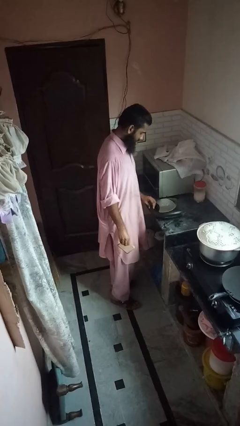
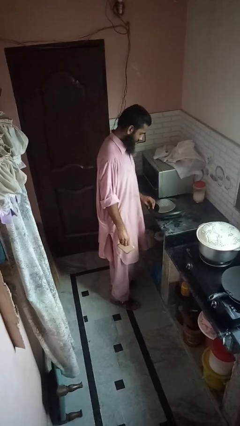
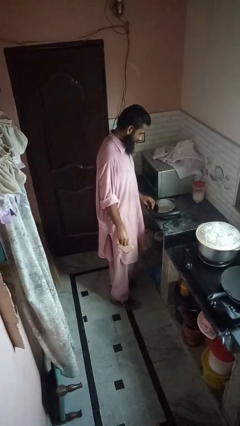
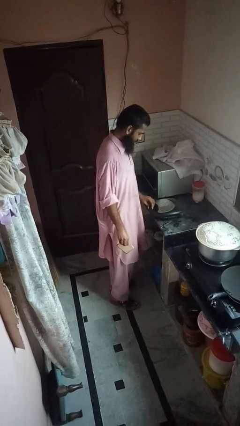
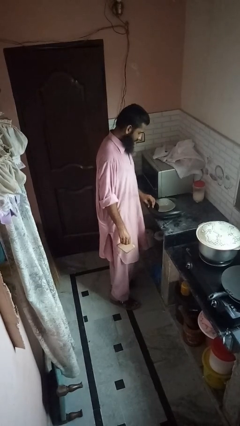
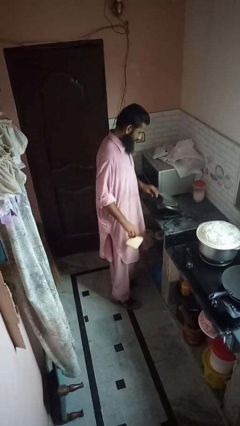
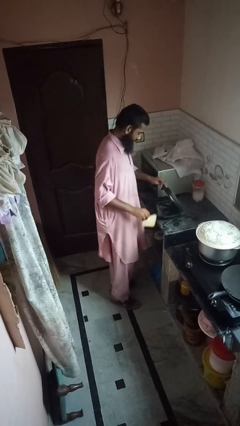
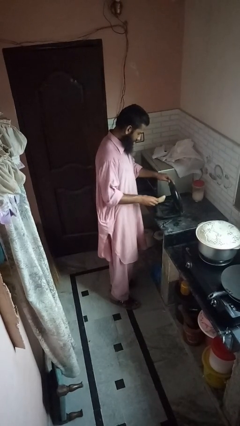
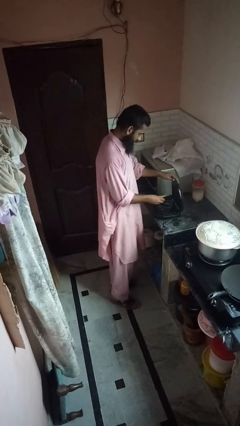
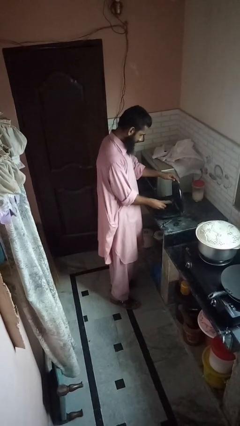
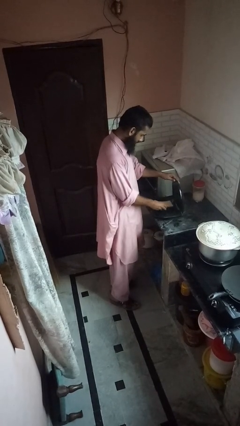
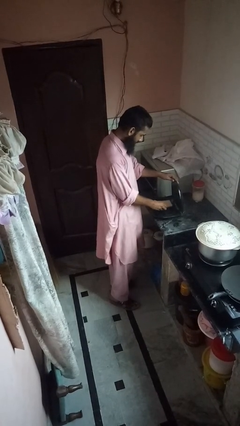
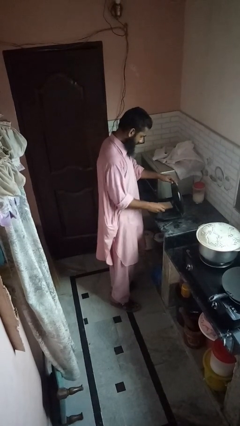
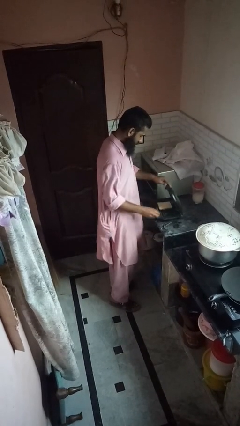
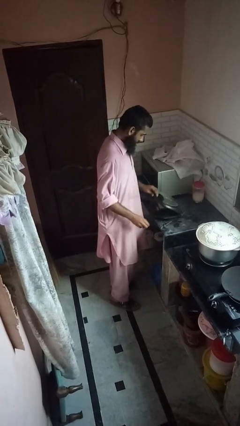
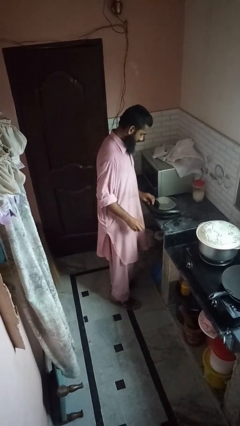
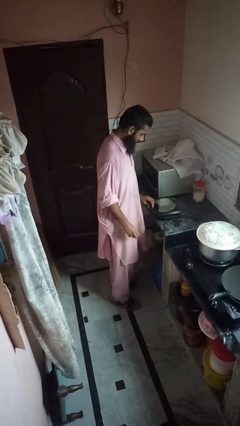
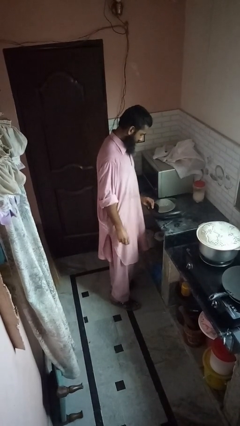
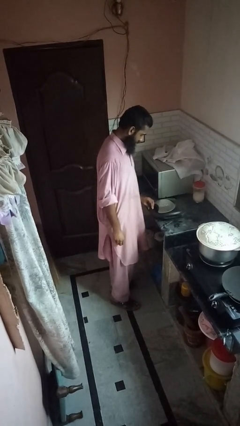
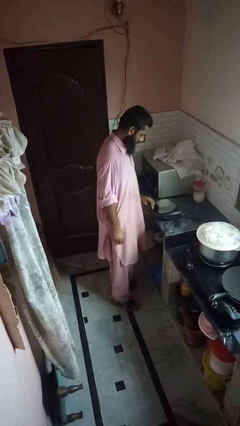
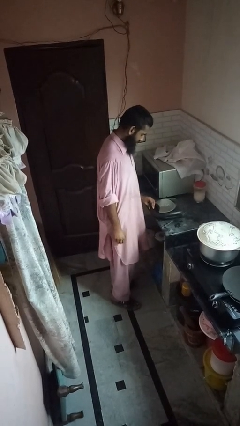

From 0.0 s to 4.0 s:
person puts object into toaster

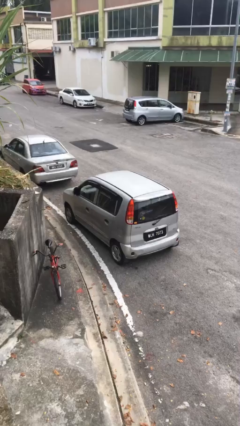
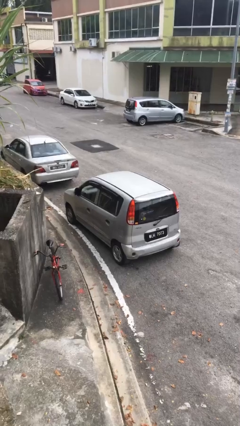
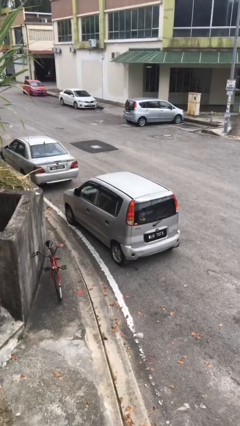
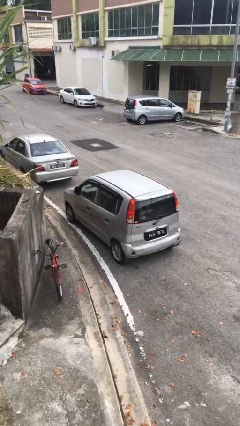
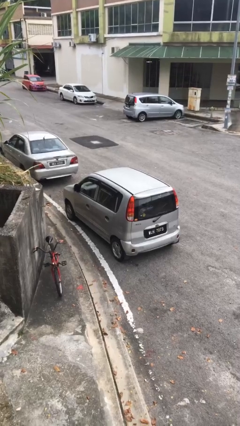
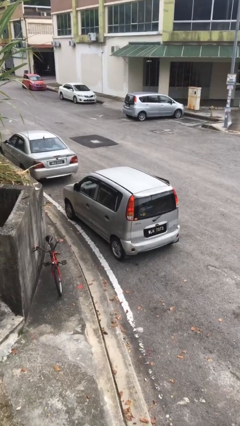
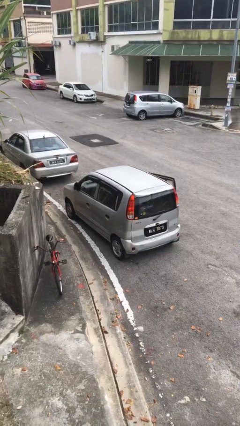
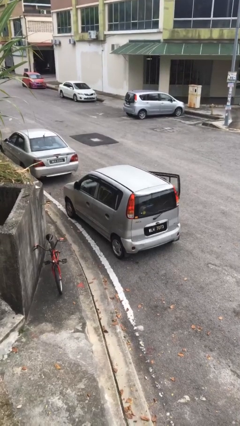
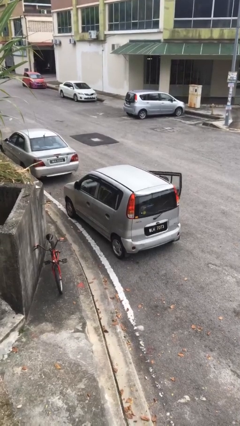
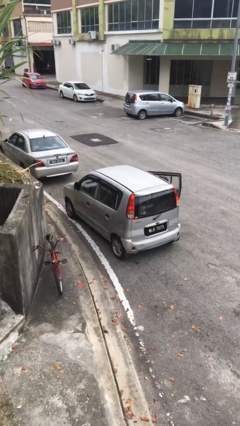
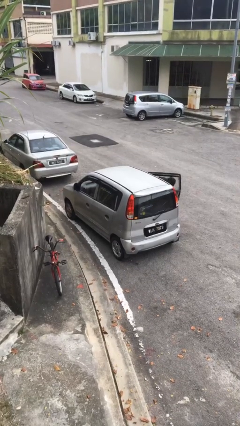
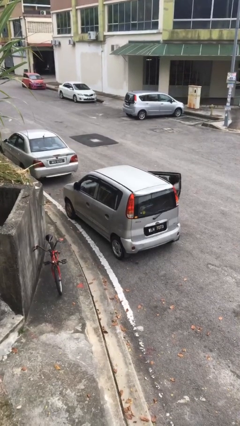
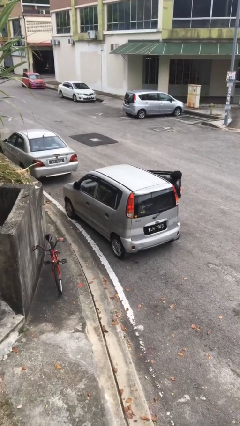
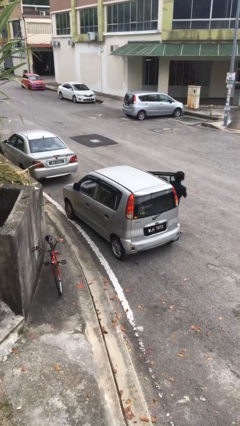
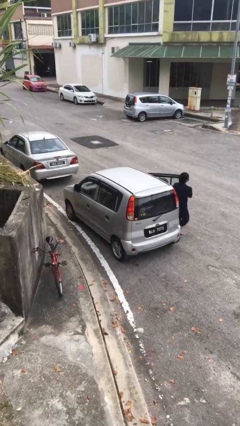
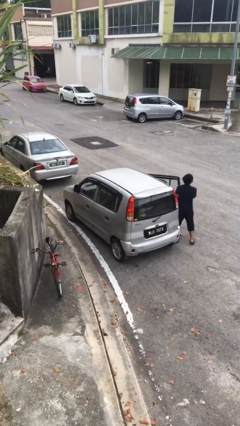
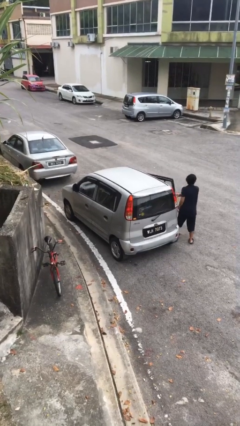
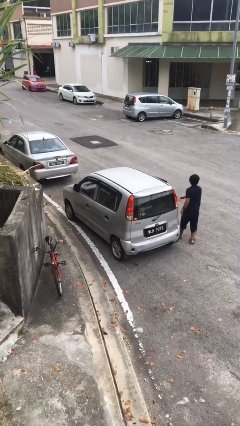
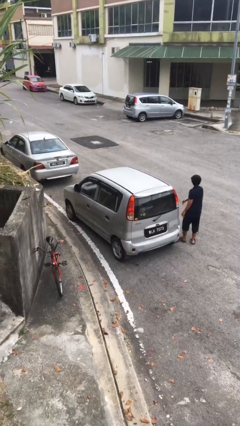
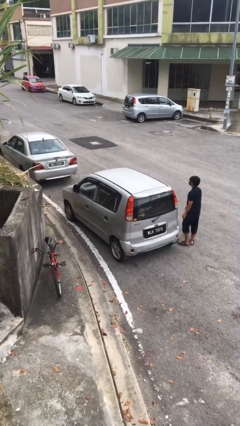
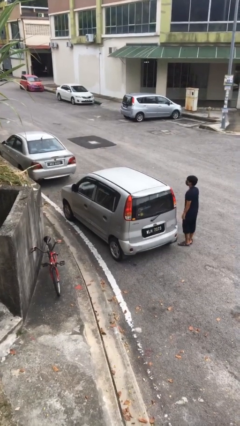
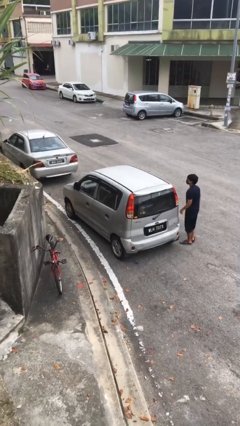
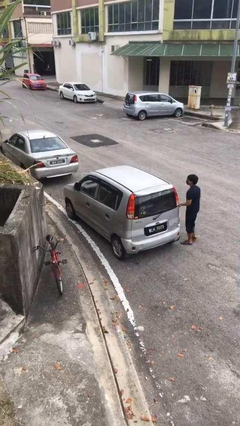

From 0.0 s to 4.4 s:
car drops off person

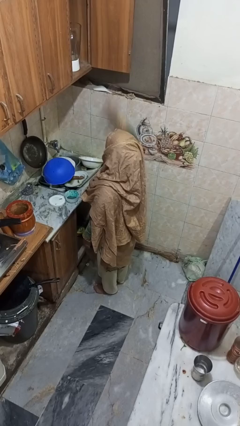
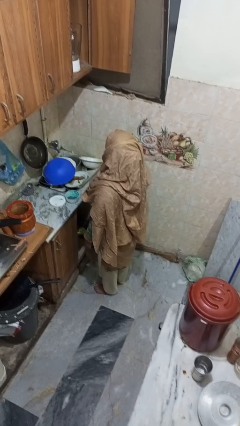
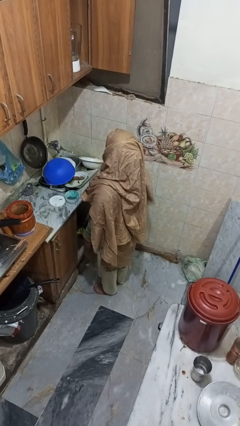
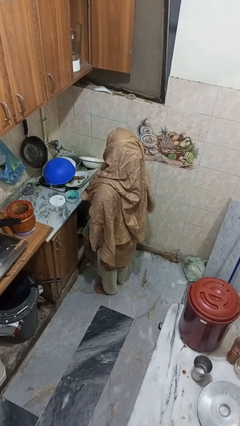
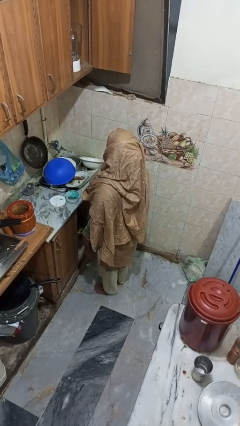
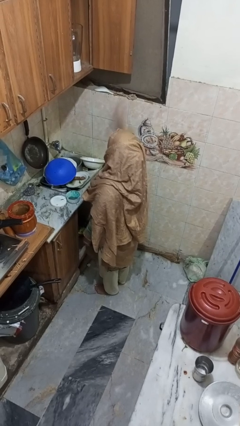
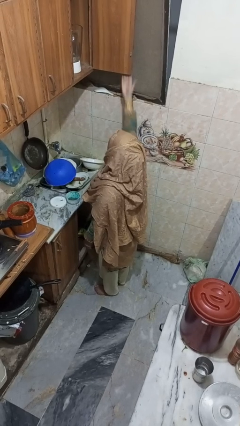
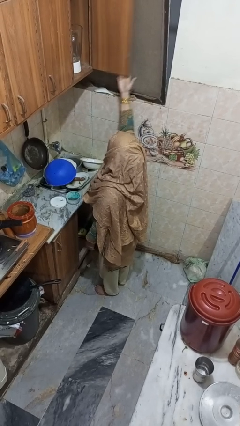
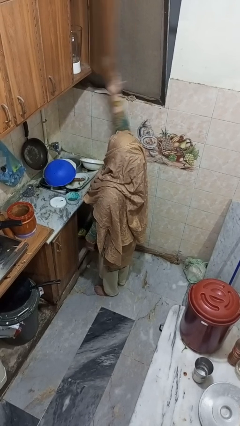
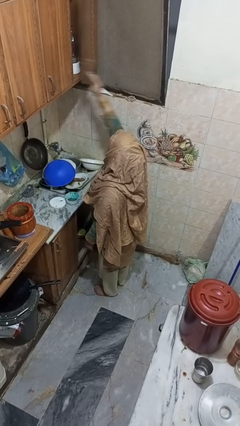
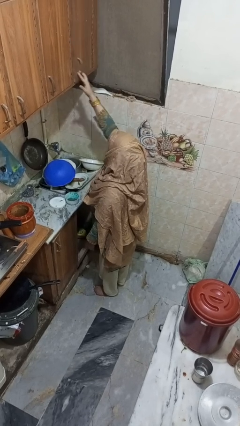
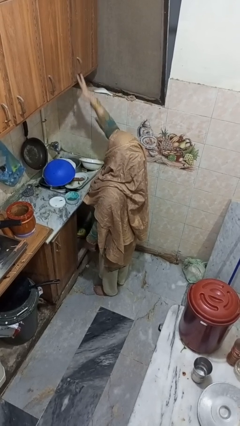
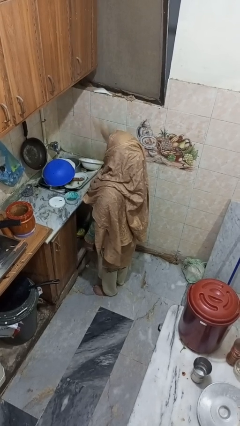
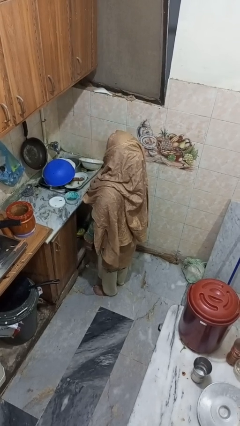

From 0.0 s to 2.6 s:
person closes cabinet

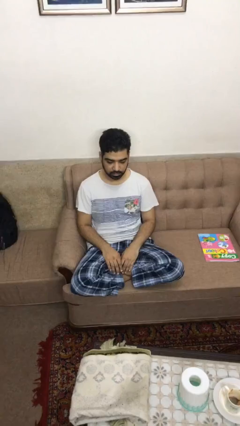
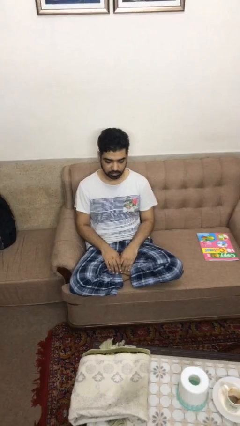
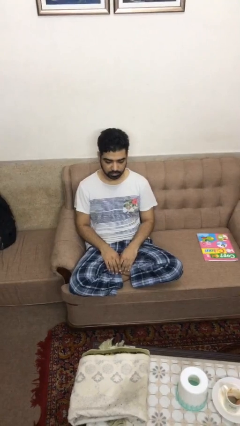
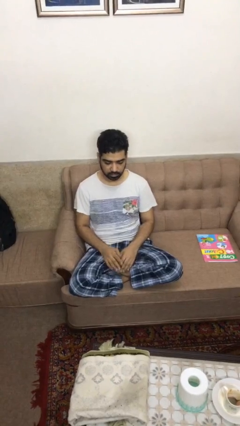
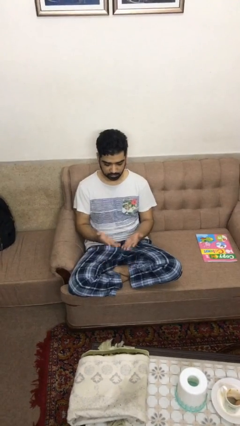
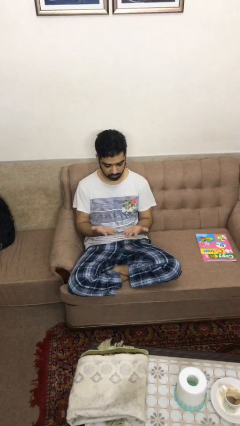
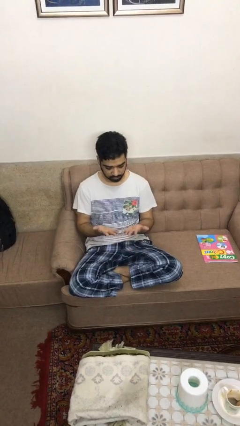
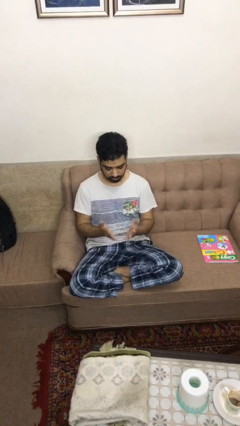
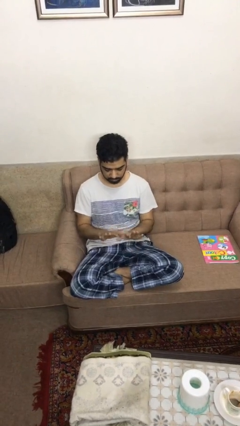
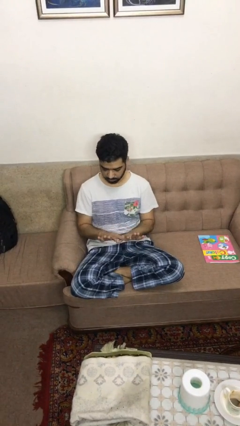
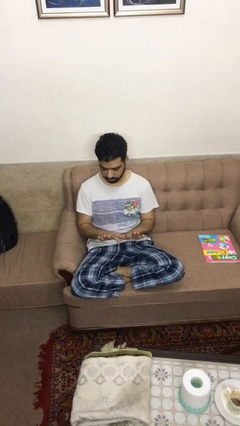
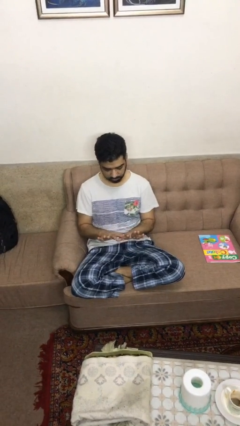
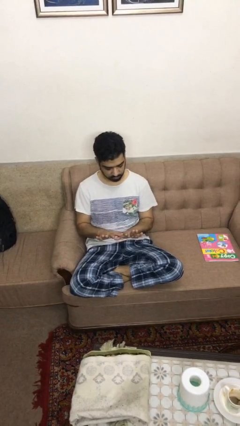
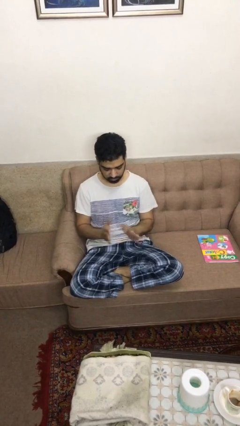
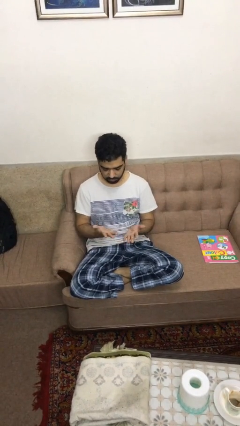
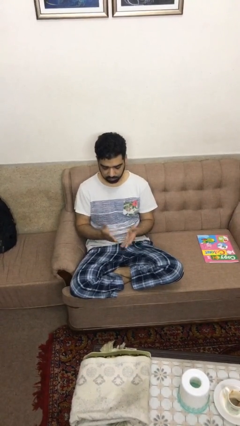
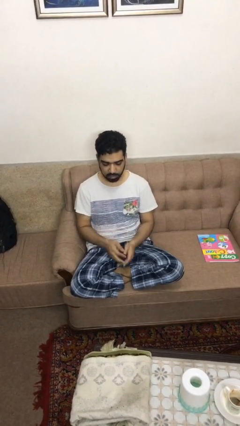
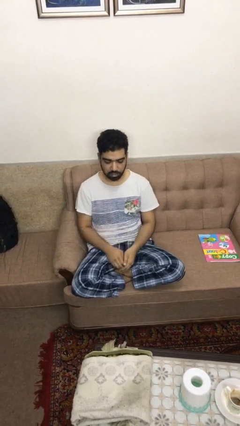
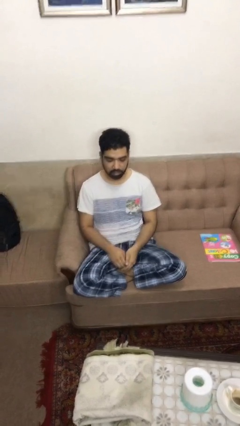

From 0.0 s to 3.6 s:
person looks at hands in lap

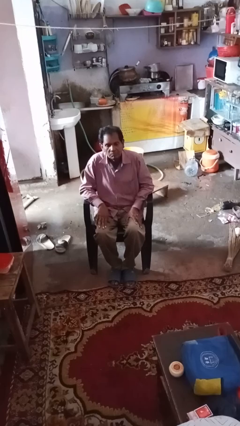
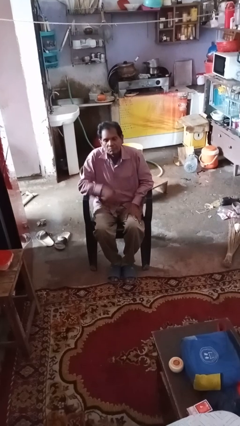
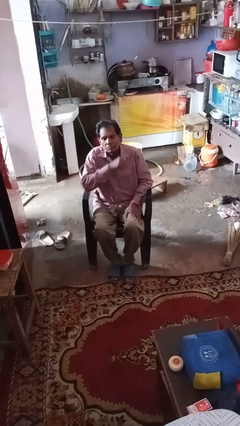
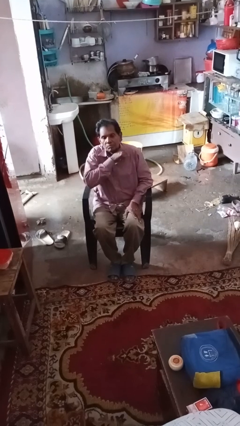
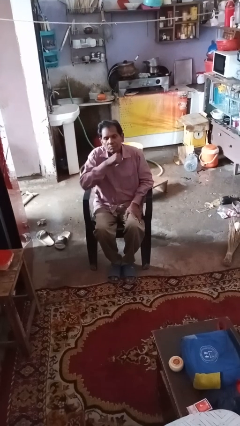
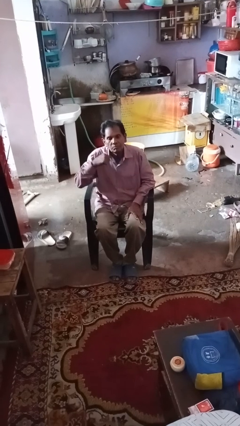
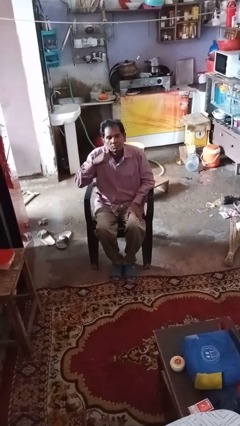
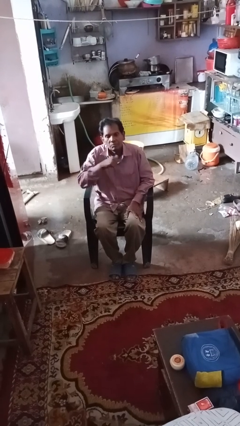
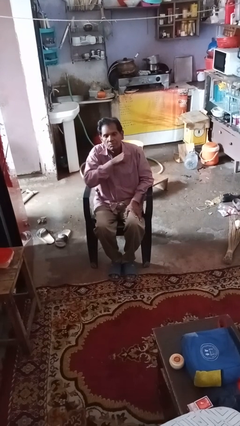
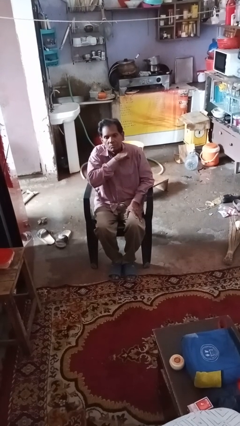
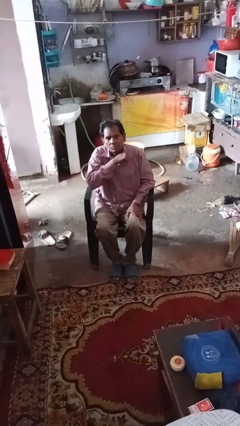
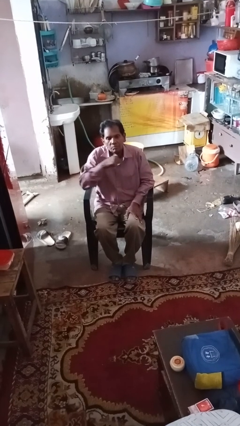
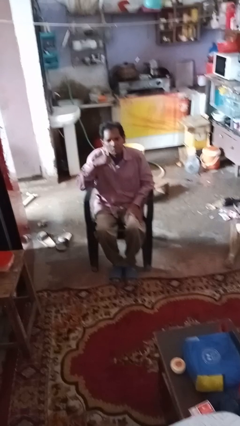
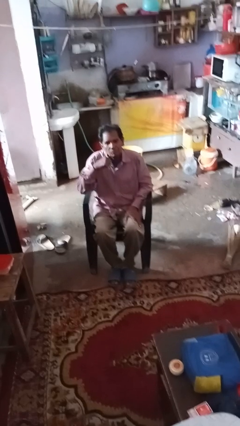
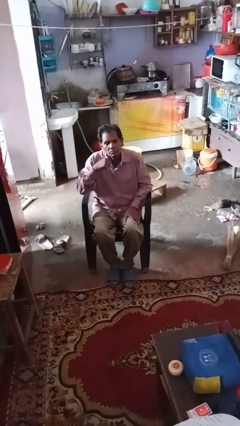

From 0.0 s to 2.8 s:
person gestures cut
